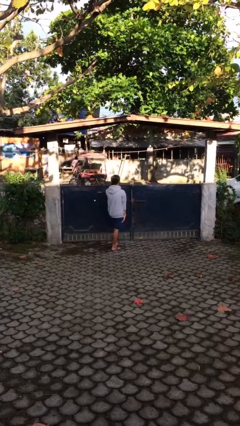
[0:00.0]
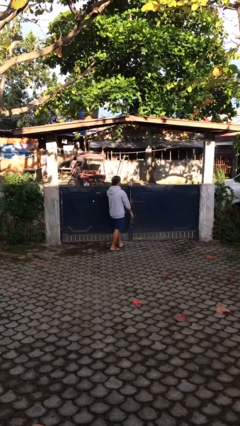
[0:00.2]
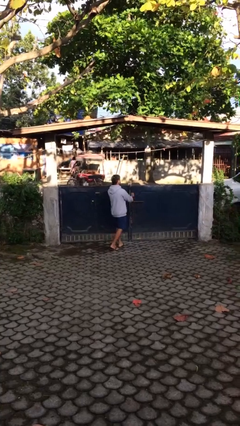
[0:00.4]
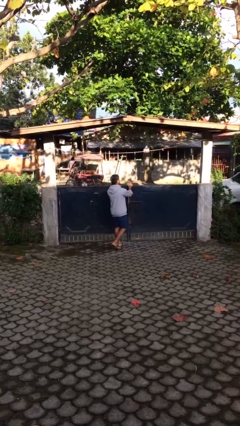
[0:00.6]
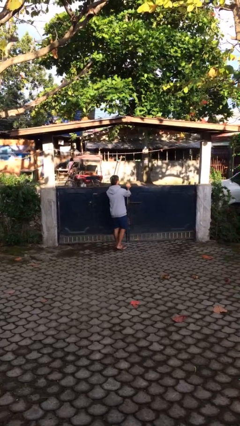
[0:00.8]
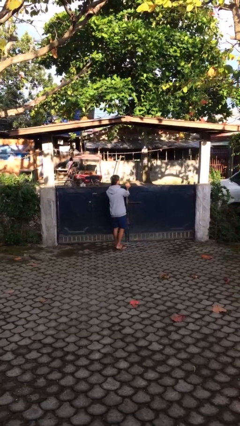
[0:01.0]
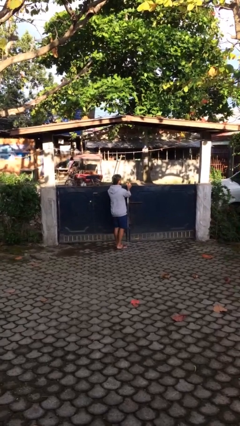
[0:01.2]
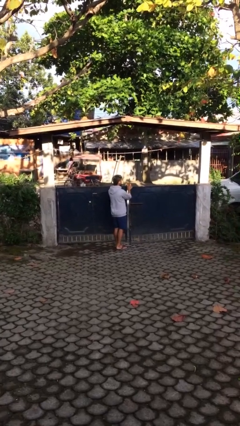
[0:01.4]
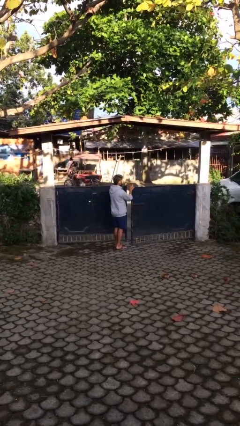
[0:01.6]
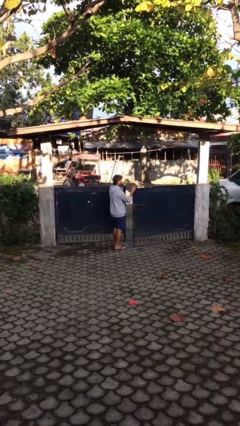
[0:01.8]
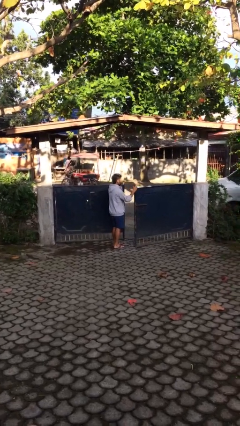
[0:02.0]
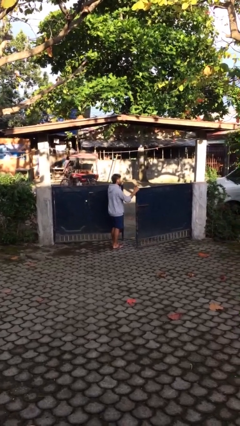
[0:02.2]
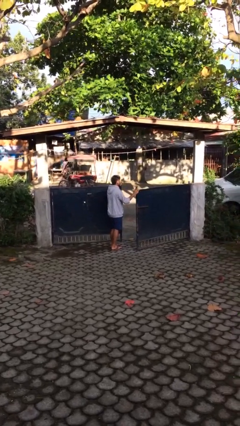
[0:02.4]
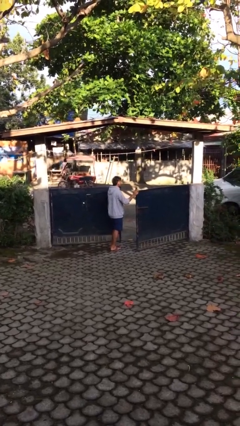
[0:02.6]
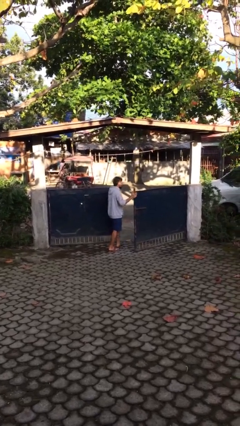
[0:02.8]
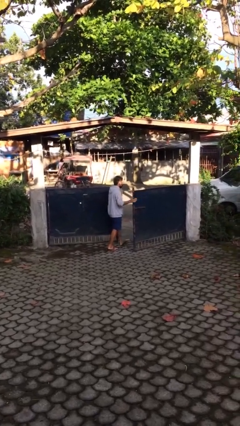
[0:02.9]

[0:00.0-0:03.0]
person opens facility door

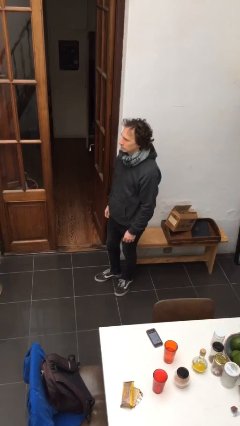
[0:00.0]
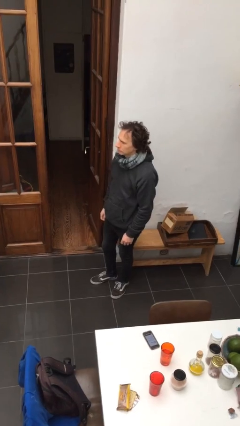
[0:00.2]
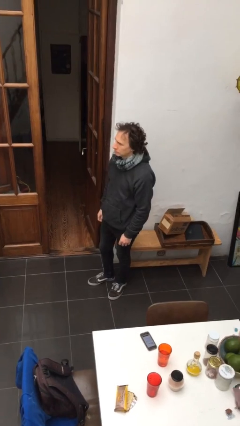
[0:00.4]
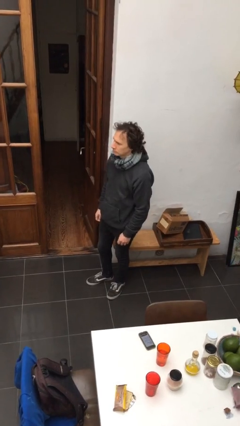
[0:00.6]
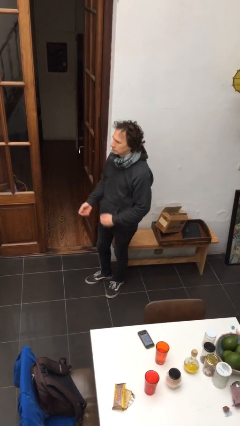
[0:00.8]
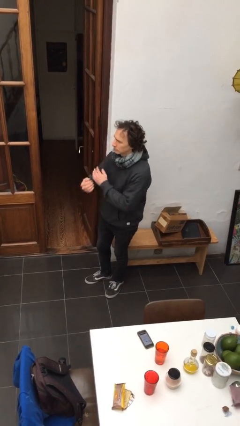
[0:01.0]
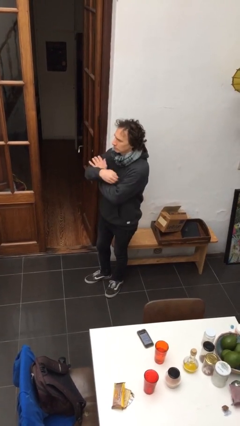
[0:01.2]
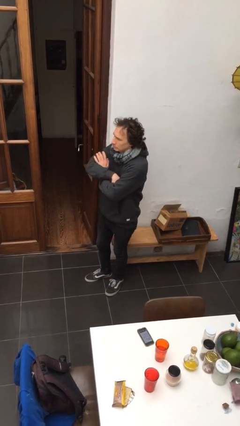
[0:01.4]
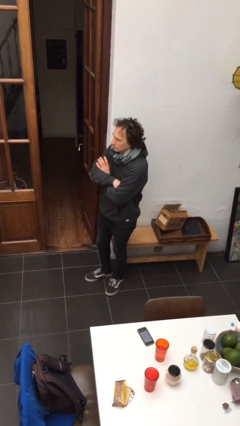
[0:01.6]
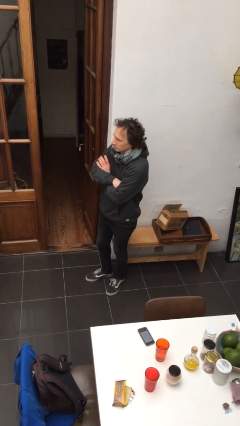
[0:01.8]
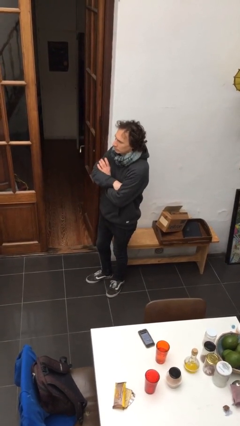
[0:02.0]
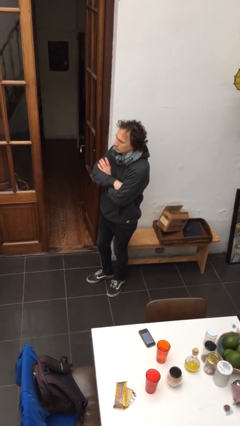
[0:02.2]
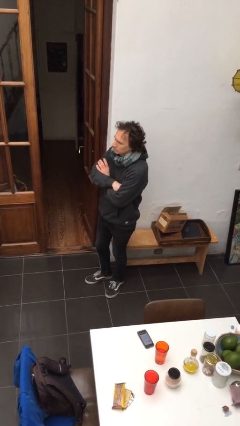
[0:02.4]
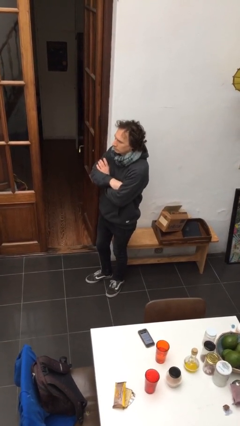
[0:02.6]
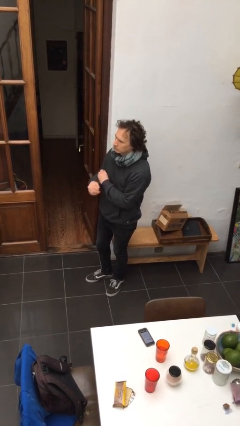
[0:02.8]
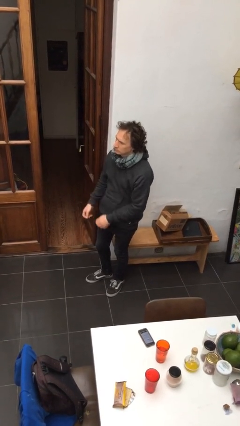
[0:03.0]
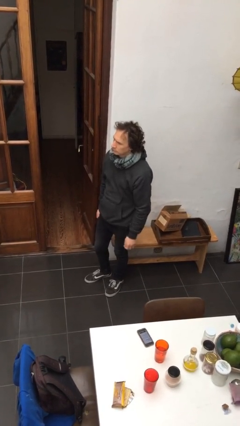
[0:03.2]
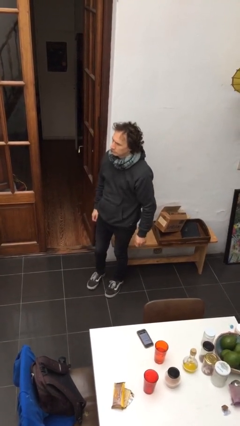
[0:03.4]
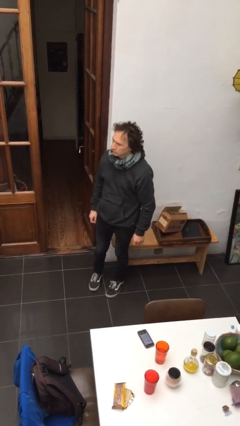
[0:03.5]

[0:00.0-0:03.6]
person crosses arms

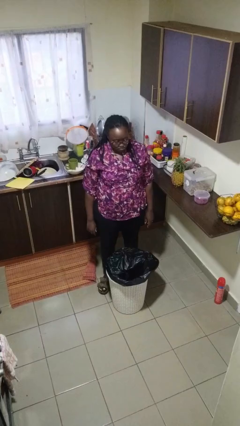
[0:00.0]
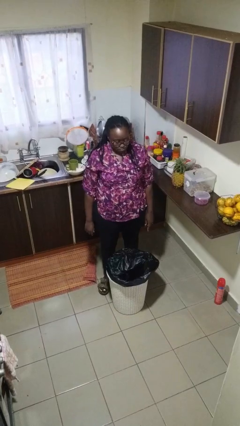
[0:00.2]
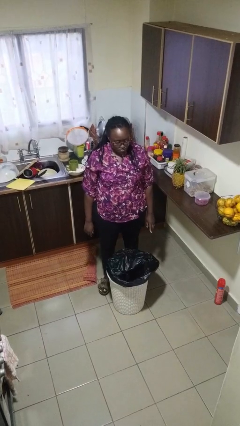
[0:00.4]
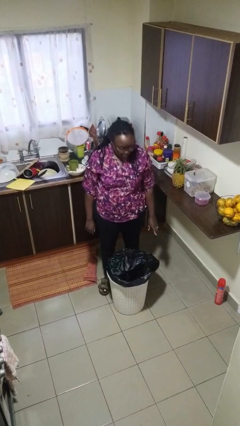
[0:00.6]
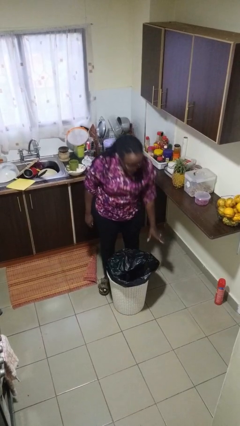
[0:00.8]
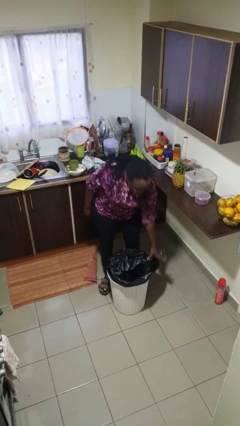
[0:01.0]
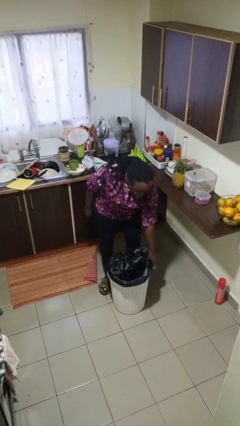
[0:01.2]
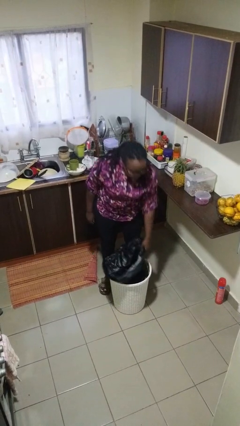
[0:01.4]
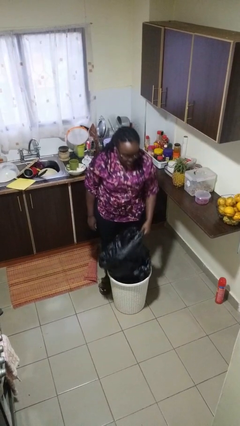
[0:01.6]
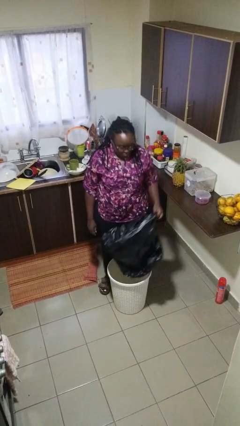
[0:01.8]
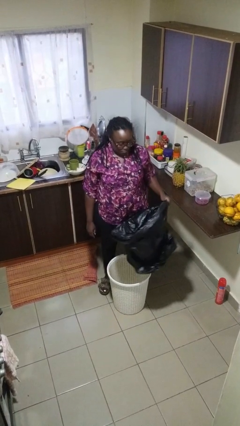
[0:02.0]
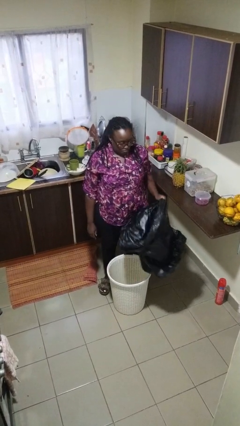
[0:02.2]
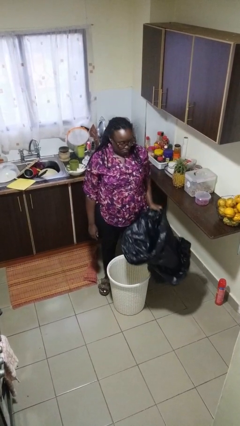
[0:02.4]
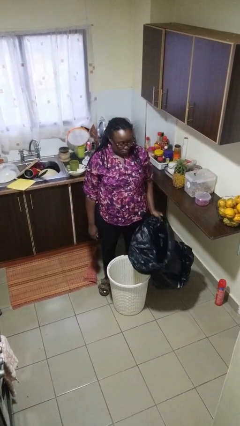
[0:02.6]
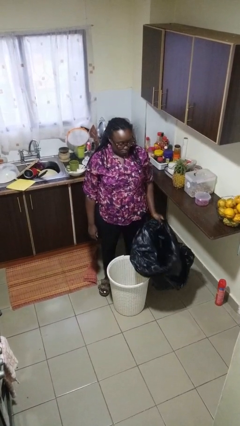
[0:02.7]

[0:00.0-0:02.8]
person inserts trashbag into trashcan

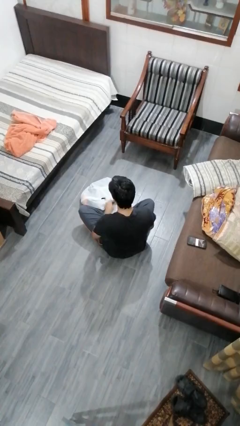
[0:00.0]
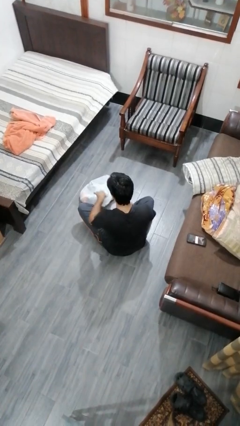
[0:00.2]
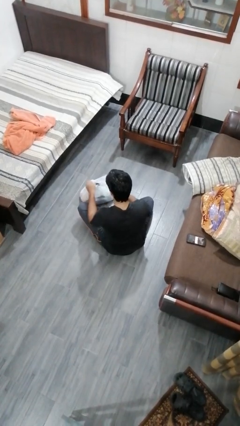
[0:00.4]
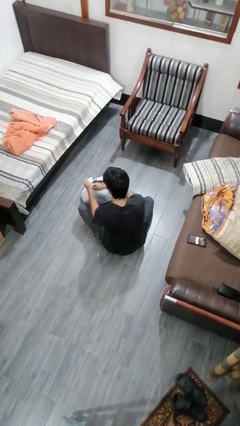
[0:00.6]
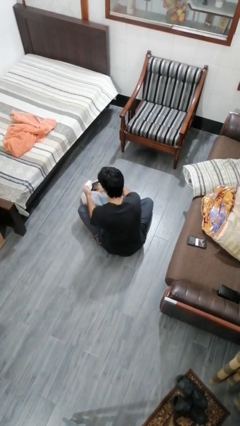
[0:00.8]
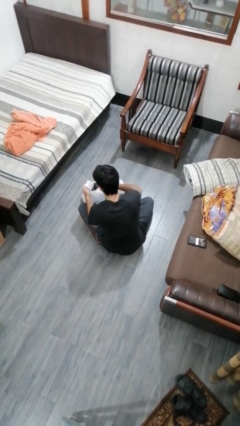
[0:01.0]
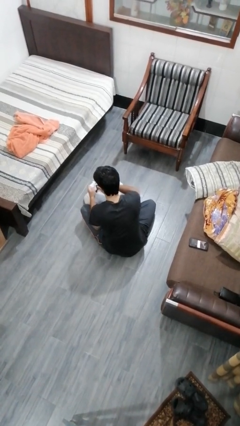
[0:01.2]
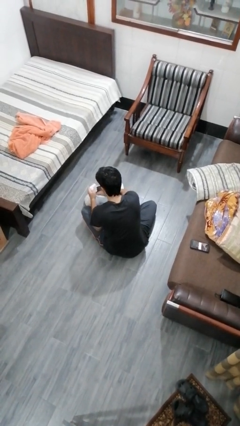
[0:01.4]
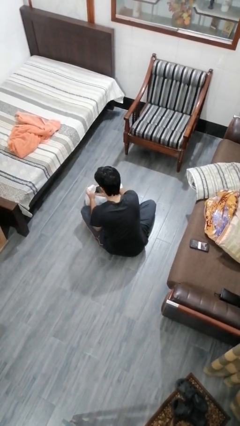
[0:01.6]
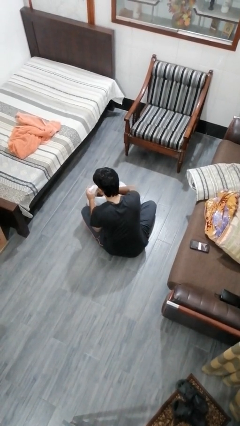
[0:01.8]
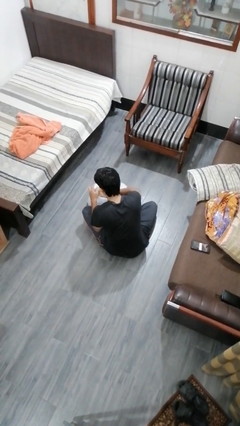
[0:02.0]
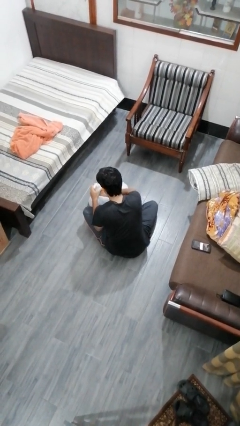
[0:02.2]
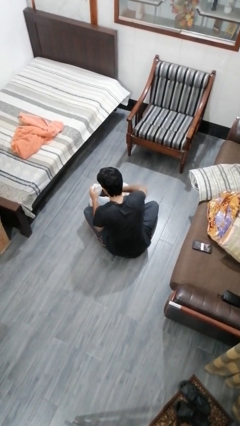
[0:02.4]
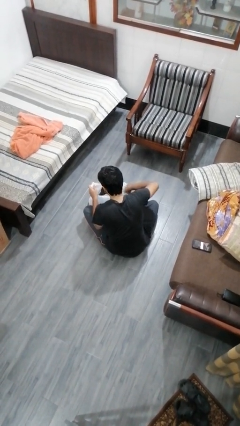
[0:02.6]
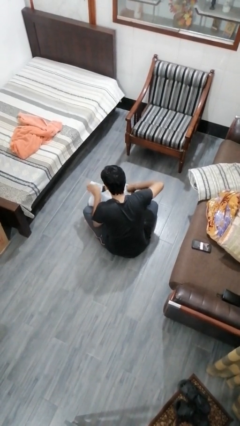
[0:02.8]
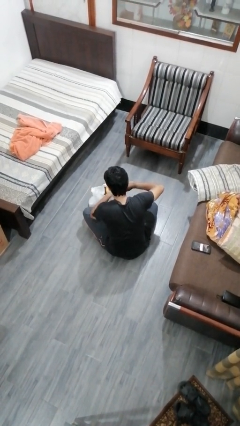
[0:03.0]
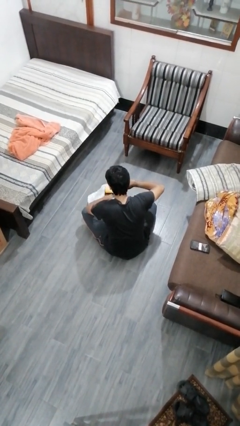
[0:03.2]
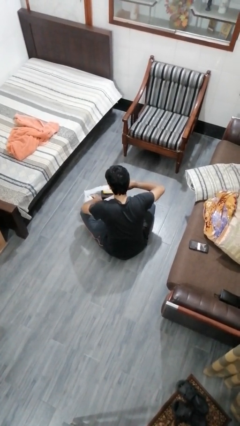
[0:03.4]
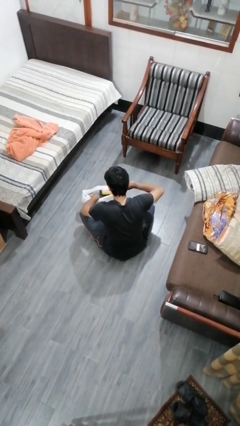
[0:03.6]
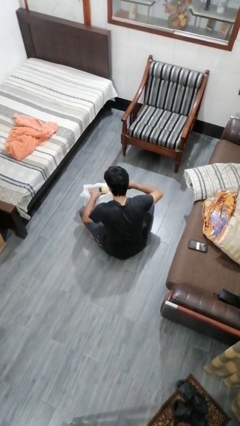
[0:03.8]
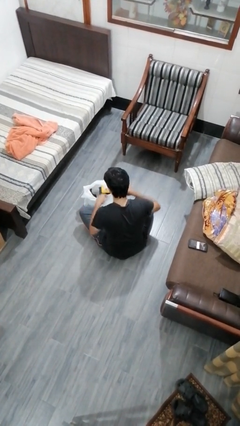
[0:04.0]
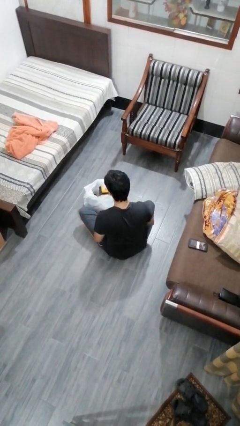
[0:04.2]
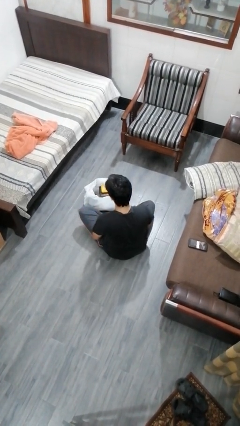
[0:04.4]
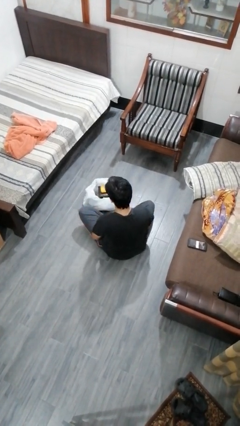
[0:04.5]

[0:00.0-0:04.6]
person searches in bag

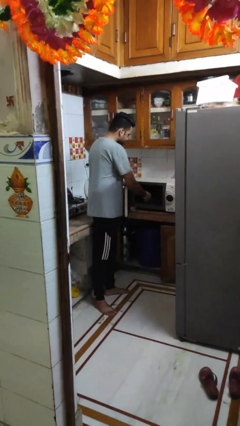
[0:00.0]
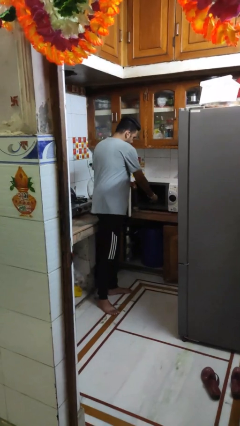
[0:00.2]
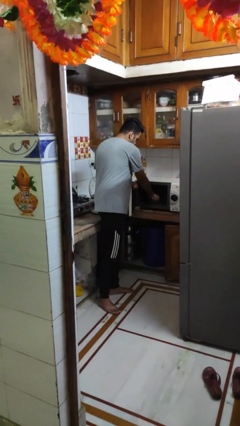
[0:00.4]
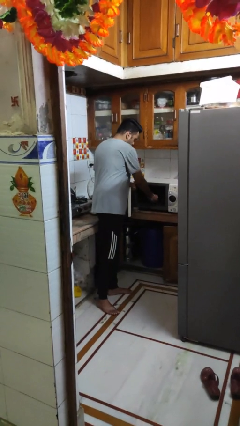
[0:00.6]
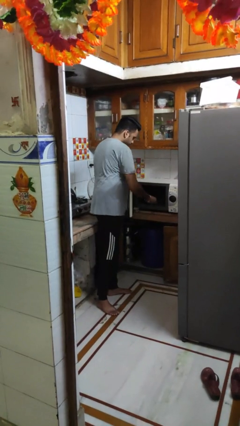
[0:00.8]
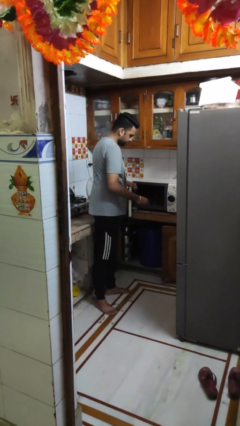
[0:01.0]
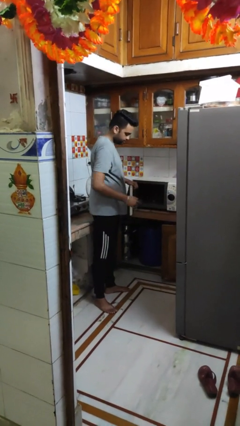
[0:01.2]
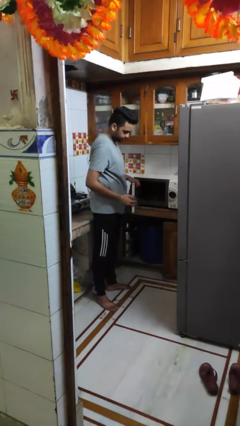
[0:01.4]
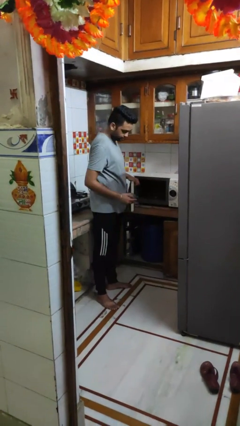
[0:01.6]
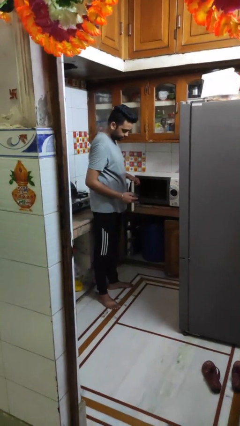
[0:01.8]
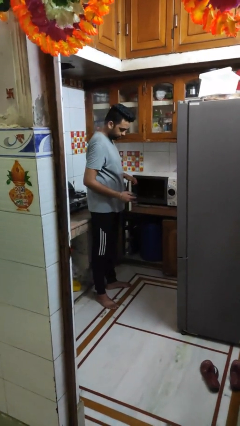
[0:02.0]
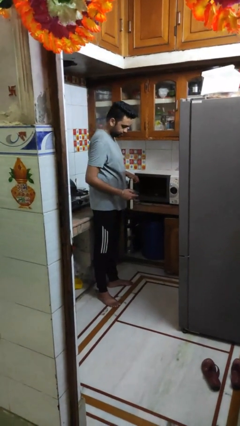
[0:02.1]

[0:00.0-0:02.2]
person takes object from microwave

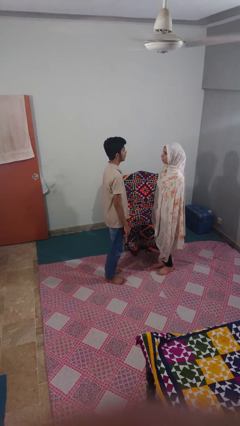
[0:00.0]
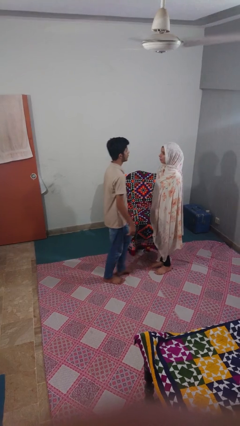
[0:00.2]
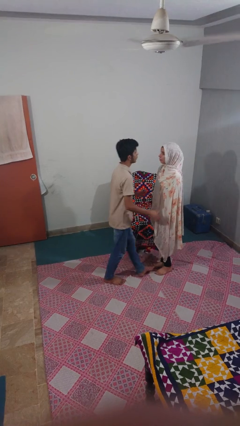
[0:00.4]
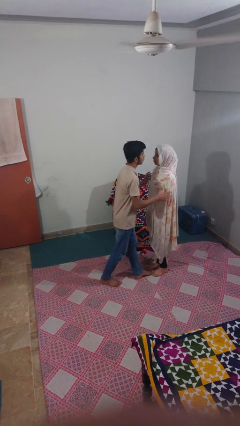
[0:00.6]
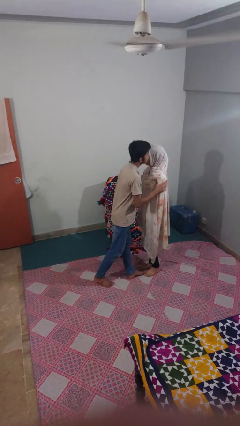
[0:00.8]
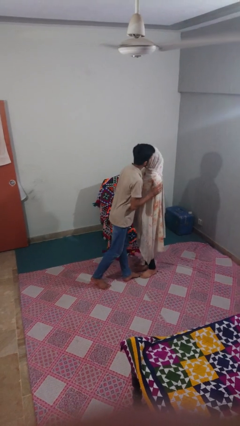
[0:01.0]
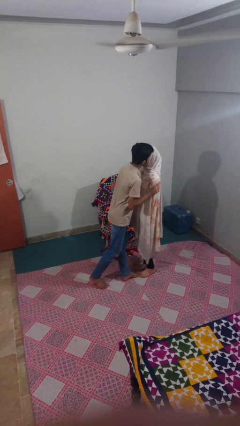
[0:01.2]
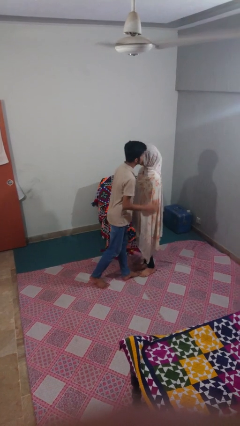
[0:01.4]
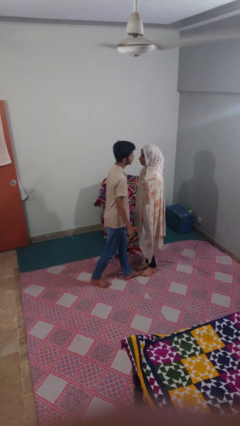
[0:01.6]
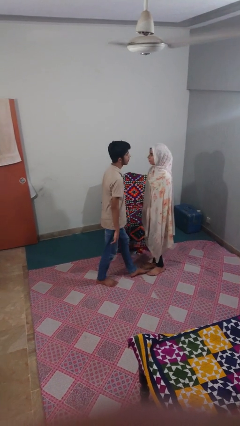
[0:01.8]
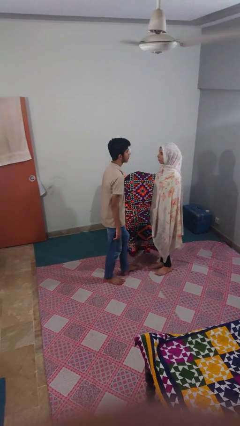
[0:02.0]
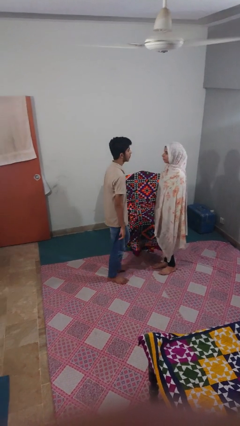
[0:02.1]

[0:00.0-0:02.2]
person kisses cheek of person
